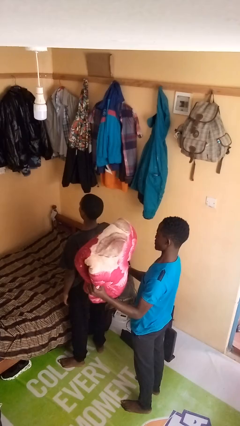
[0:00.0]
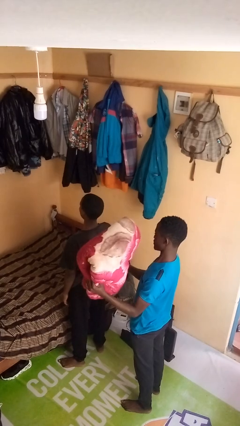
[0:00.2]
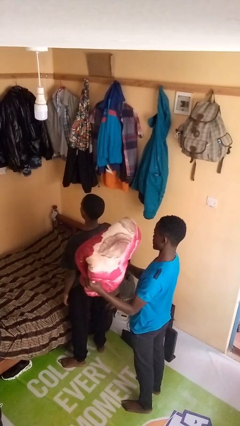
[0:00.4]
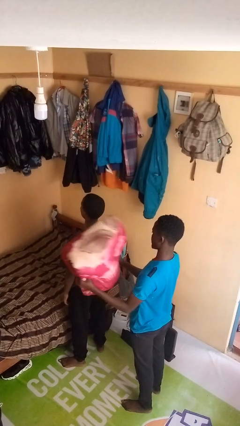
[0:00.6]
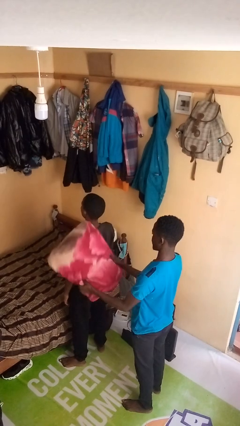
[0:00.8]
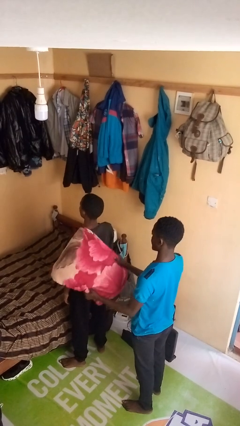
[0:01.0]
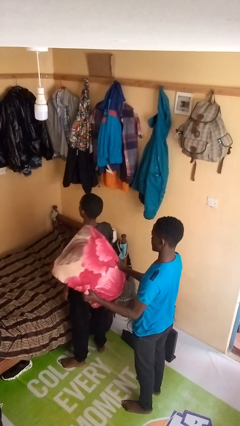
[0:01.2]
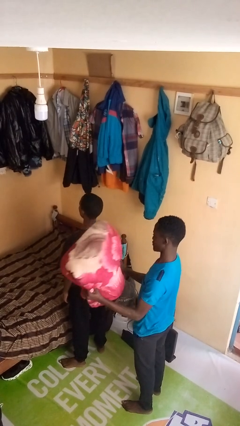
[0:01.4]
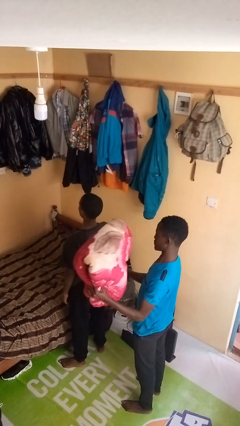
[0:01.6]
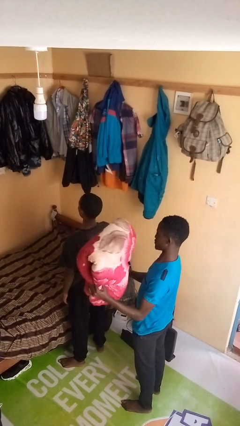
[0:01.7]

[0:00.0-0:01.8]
person hits person with pillow

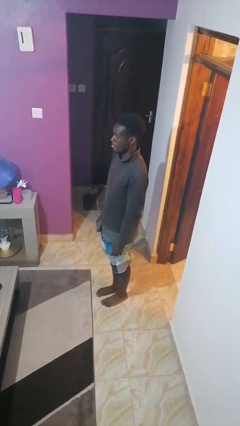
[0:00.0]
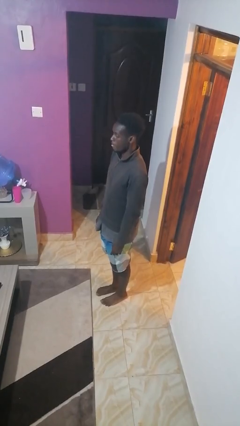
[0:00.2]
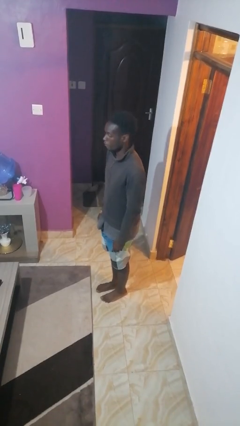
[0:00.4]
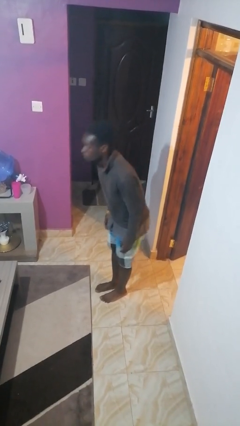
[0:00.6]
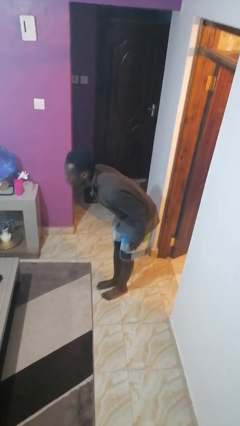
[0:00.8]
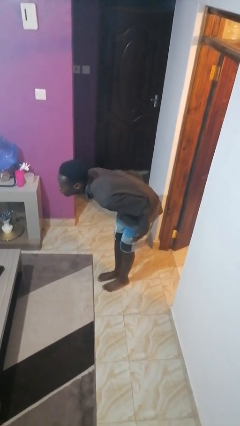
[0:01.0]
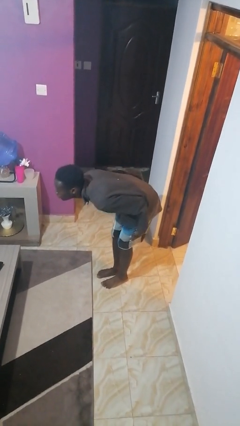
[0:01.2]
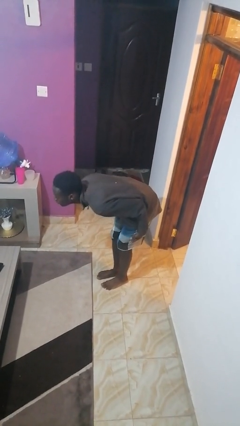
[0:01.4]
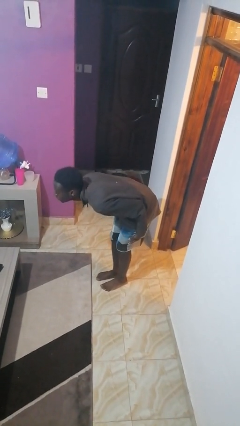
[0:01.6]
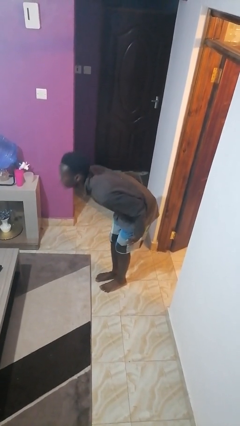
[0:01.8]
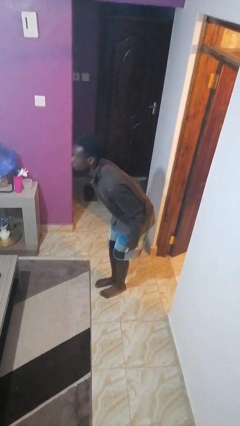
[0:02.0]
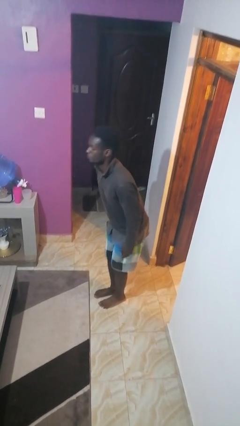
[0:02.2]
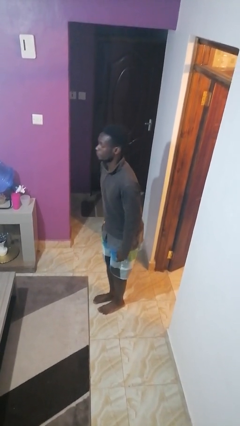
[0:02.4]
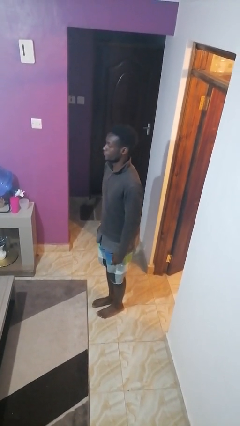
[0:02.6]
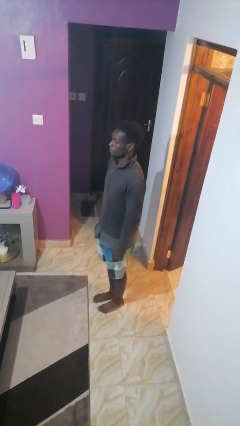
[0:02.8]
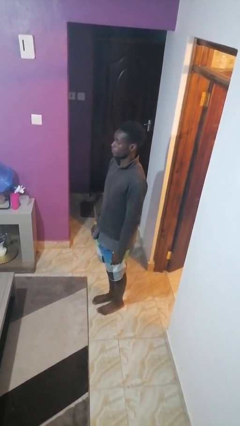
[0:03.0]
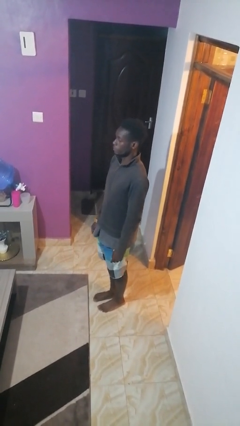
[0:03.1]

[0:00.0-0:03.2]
person bows

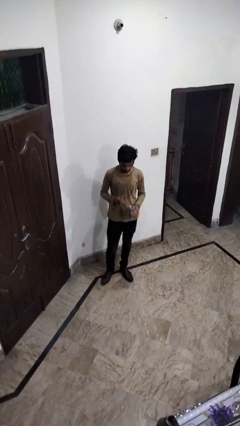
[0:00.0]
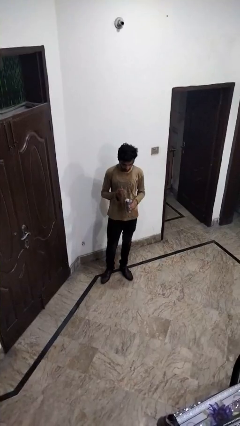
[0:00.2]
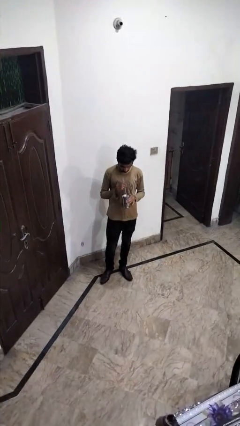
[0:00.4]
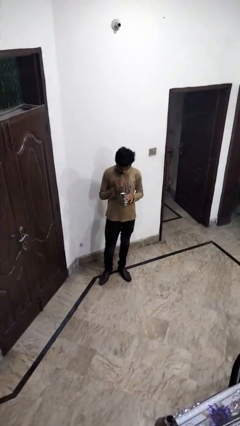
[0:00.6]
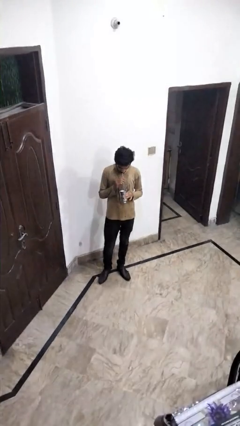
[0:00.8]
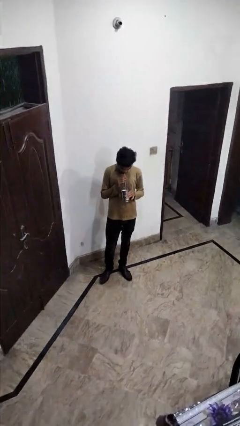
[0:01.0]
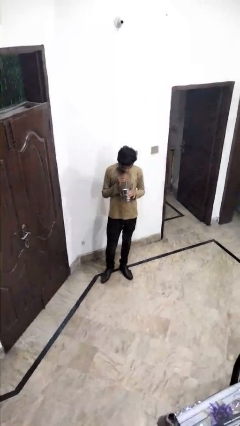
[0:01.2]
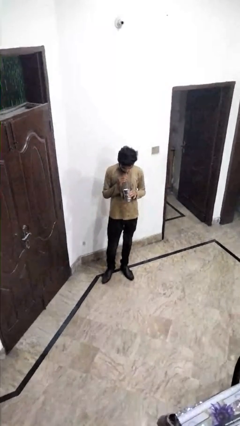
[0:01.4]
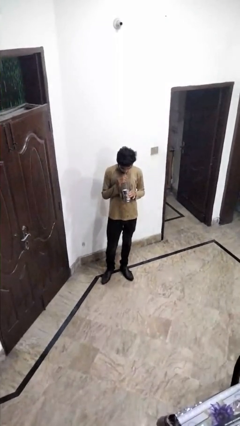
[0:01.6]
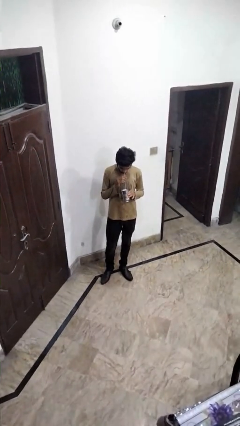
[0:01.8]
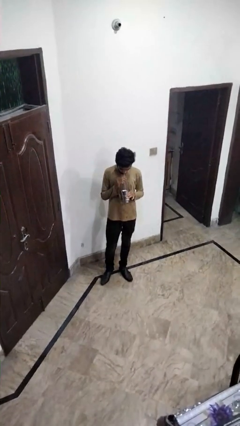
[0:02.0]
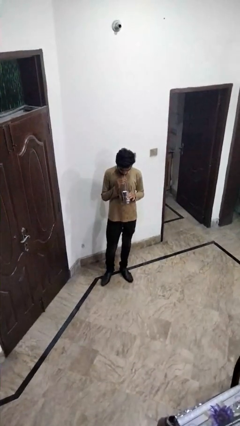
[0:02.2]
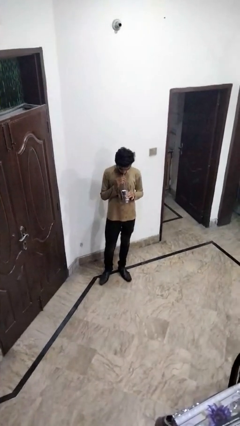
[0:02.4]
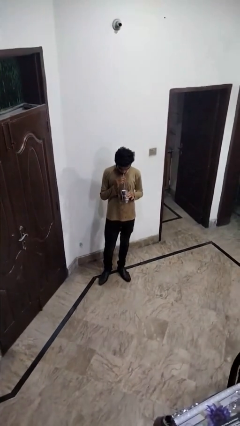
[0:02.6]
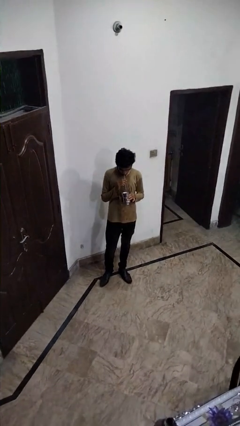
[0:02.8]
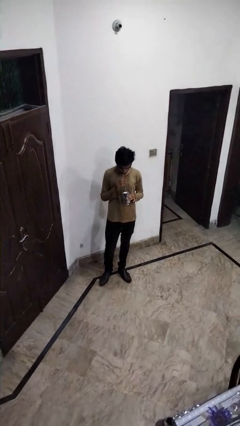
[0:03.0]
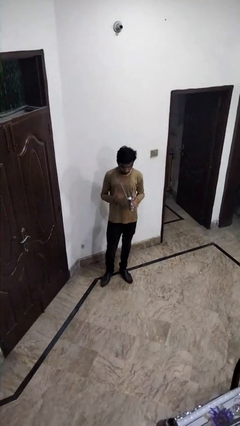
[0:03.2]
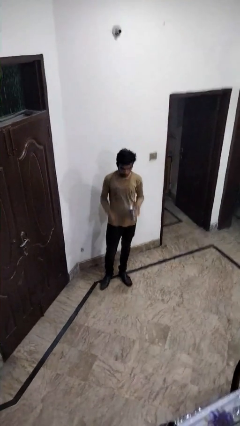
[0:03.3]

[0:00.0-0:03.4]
person drinks from straw

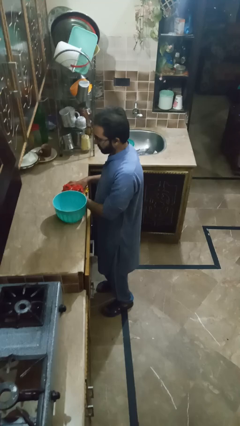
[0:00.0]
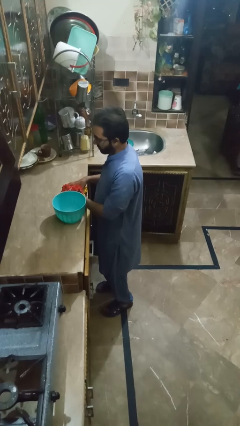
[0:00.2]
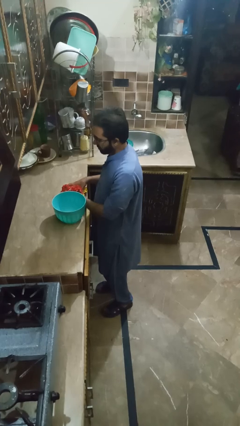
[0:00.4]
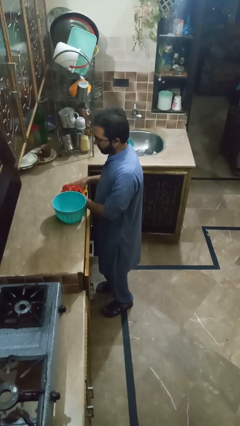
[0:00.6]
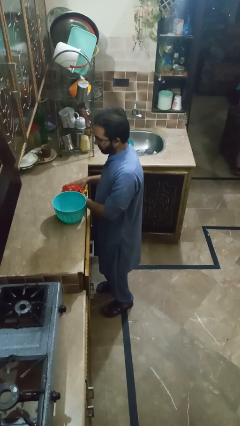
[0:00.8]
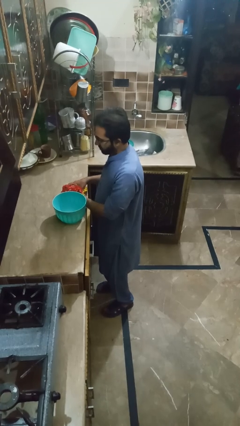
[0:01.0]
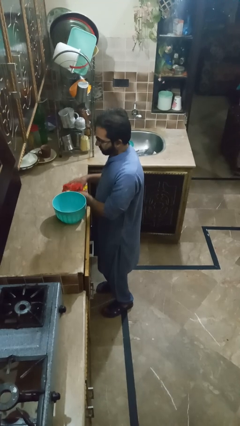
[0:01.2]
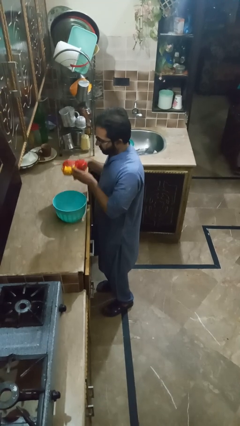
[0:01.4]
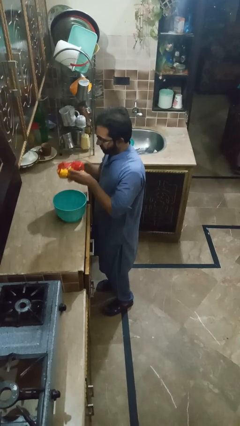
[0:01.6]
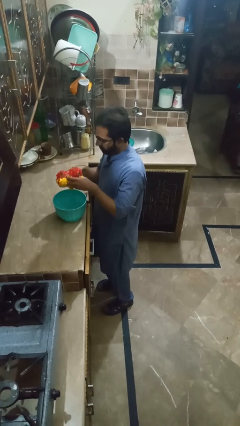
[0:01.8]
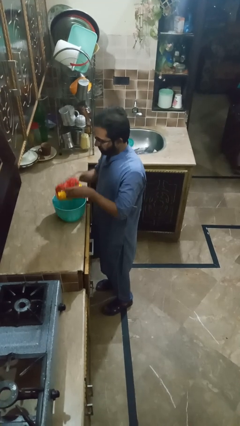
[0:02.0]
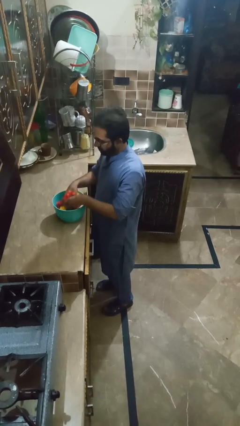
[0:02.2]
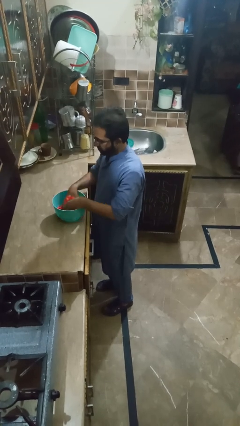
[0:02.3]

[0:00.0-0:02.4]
person pours into bowl

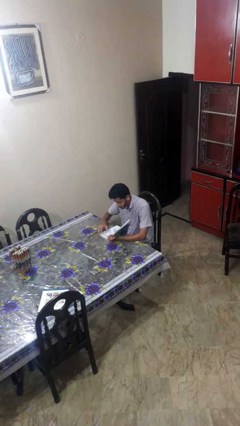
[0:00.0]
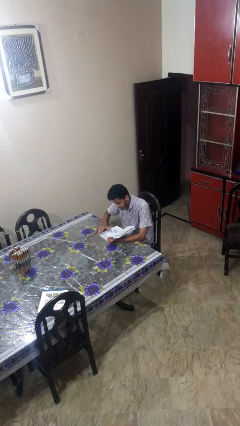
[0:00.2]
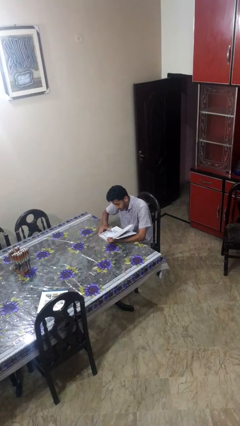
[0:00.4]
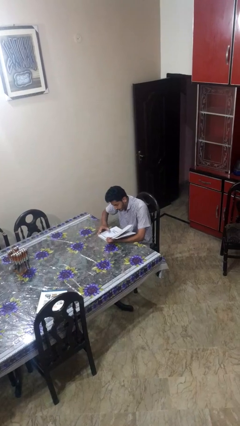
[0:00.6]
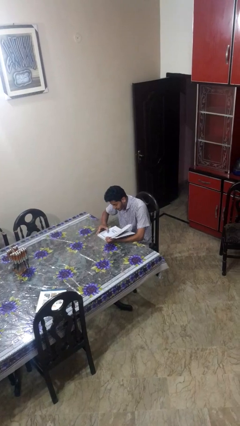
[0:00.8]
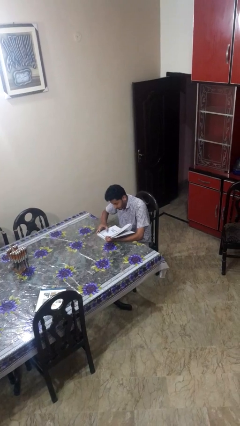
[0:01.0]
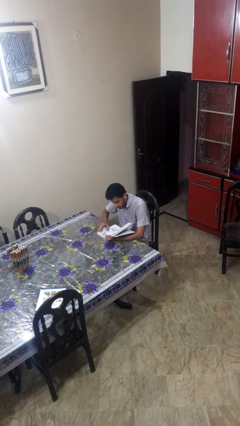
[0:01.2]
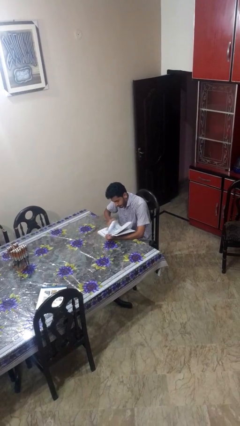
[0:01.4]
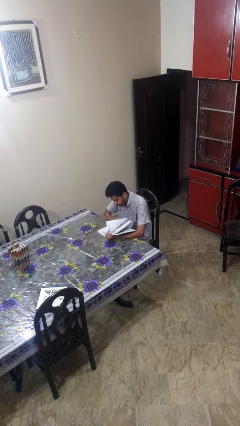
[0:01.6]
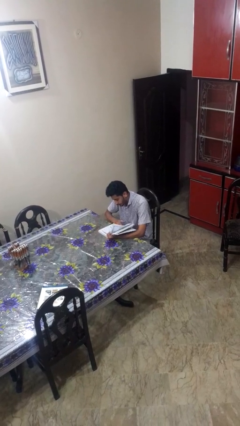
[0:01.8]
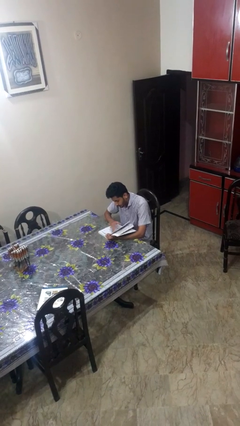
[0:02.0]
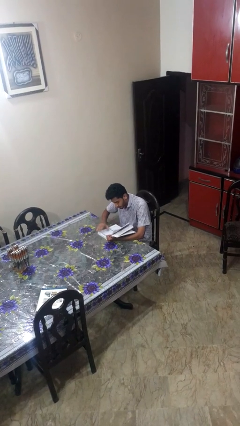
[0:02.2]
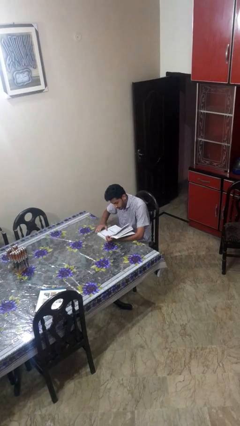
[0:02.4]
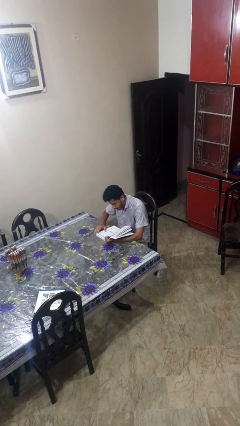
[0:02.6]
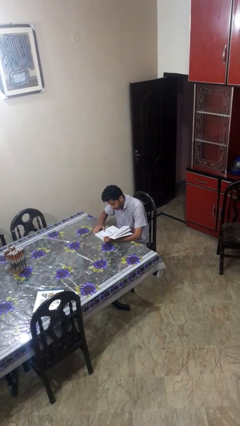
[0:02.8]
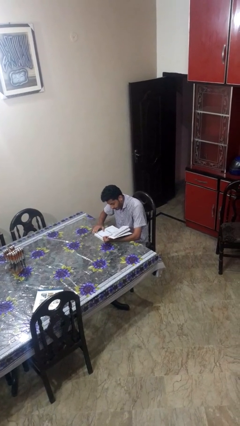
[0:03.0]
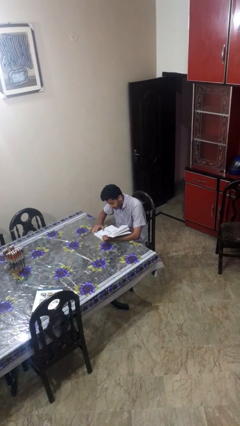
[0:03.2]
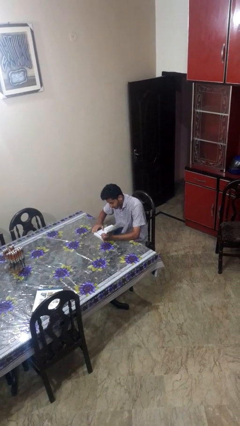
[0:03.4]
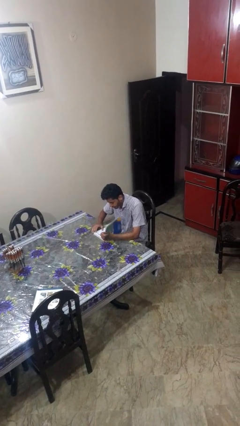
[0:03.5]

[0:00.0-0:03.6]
person reads book

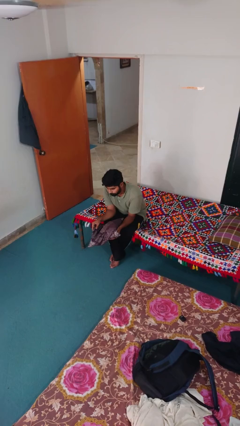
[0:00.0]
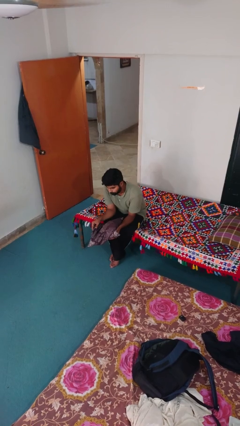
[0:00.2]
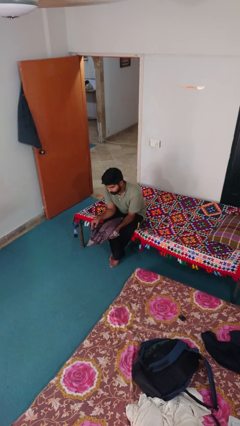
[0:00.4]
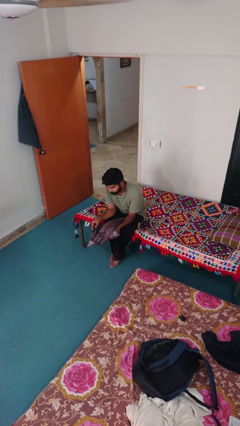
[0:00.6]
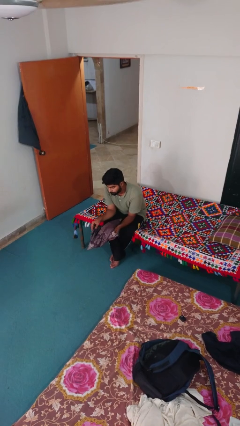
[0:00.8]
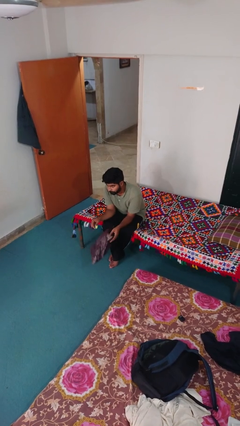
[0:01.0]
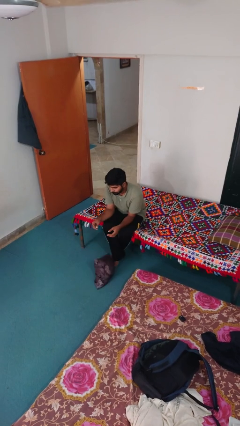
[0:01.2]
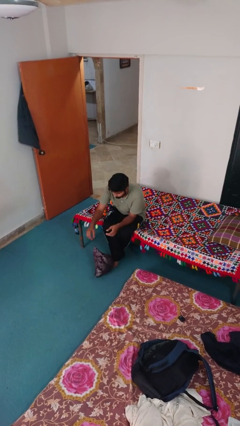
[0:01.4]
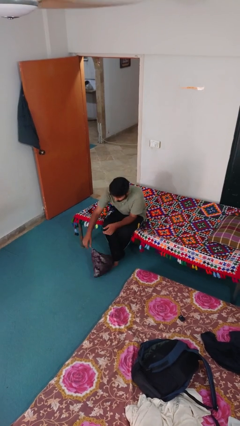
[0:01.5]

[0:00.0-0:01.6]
person drops object

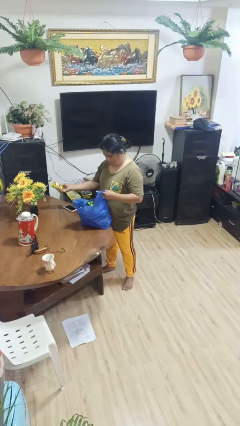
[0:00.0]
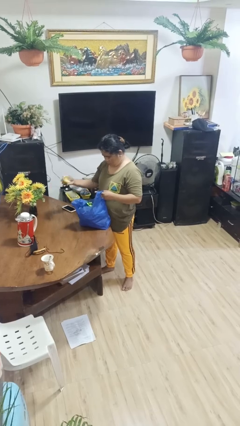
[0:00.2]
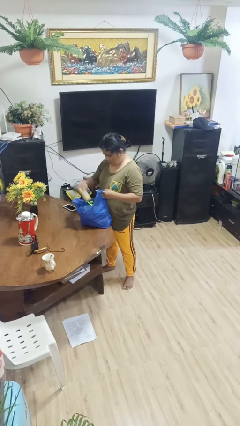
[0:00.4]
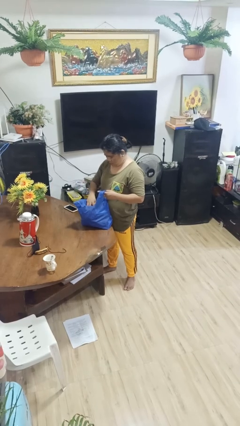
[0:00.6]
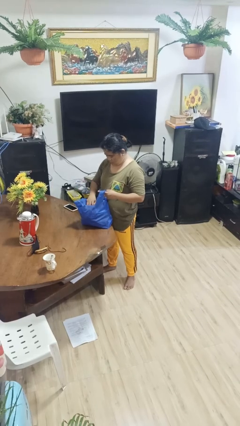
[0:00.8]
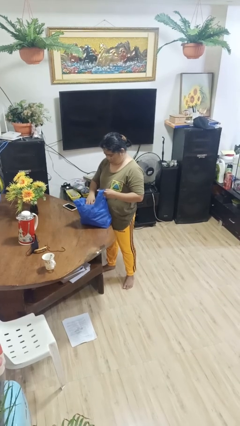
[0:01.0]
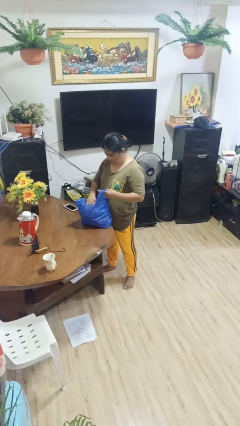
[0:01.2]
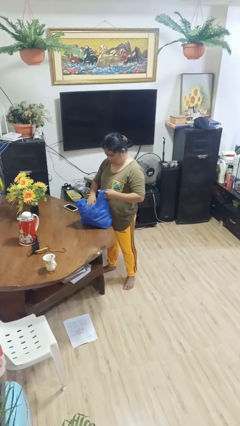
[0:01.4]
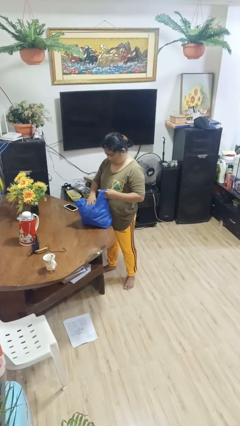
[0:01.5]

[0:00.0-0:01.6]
person puts object into bag
